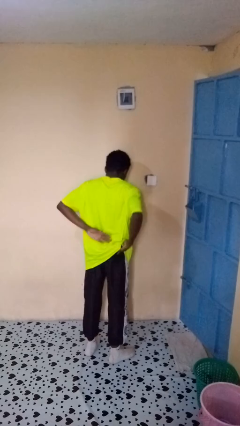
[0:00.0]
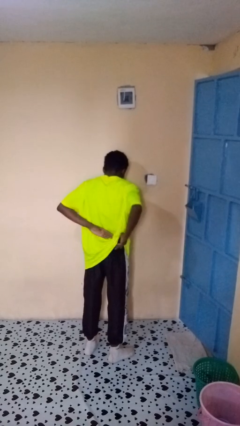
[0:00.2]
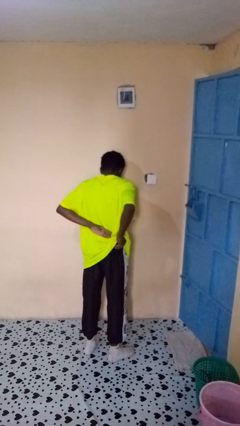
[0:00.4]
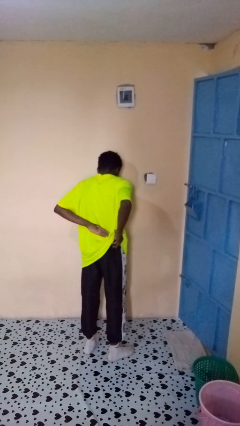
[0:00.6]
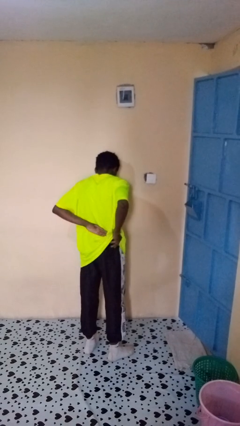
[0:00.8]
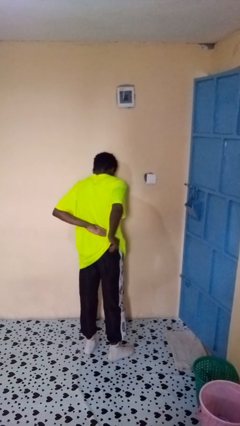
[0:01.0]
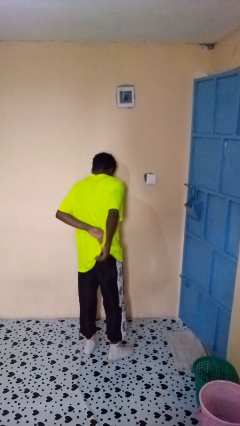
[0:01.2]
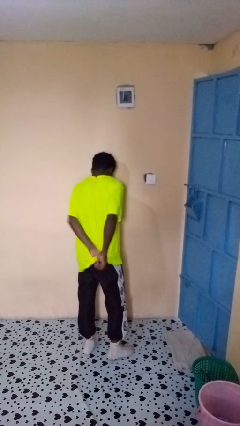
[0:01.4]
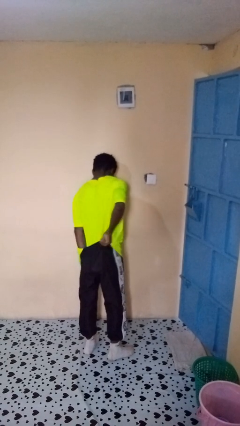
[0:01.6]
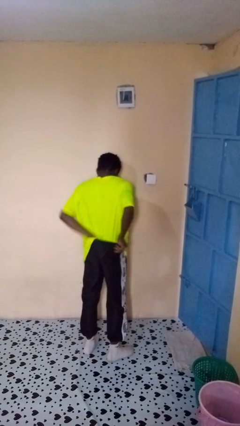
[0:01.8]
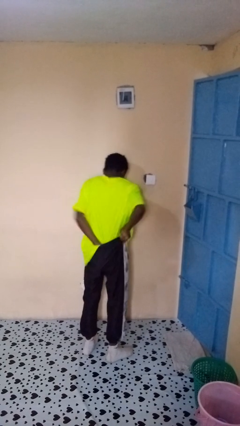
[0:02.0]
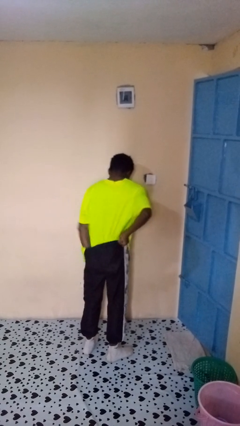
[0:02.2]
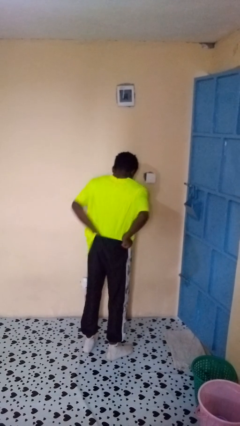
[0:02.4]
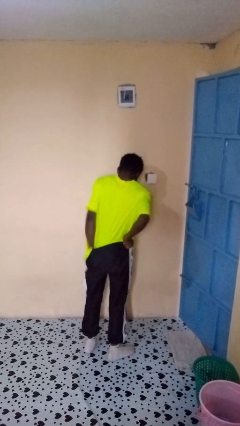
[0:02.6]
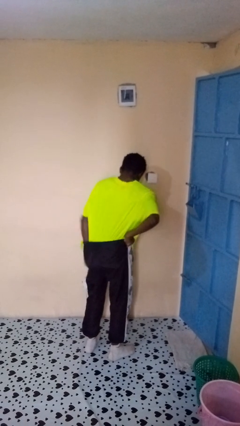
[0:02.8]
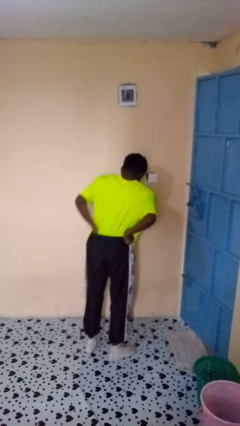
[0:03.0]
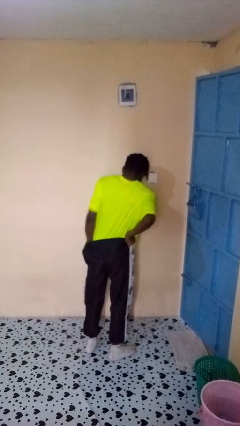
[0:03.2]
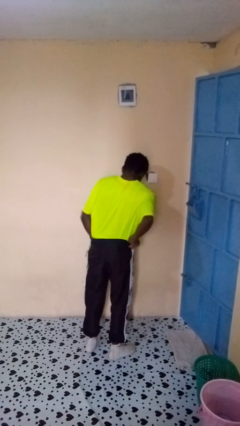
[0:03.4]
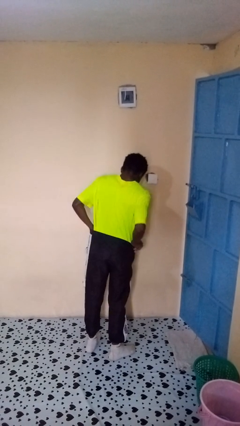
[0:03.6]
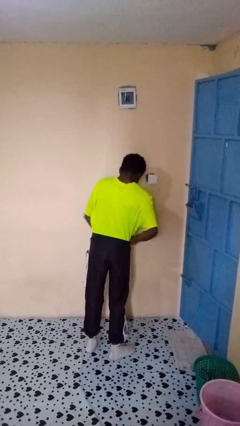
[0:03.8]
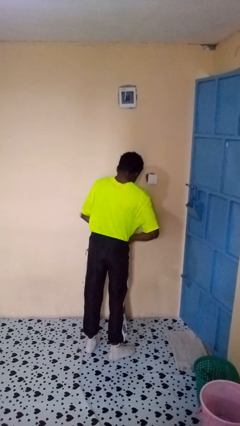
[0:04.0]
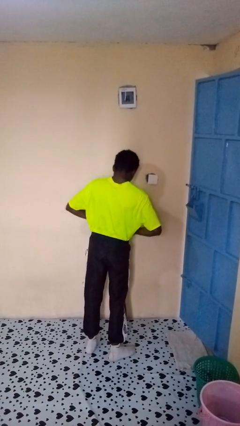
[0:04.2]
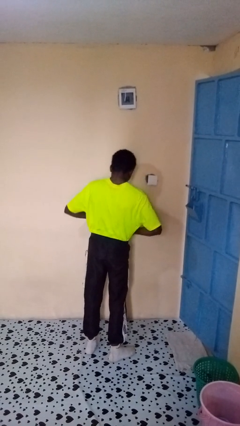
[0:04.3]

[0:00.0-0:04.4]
person tucks in shirt

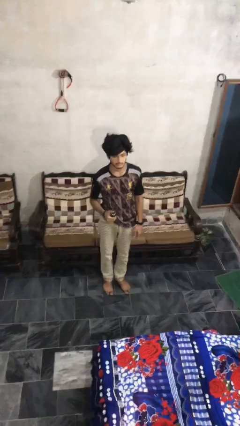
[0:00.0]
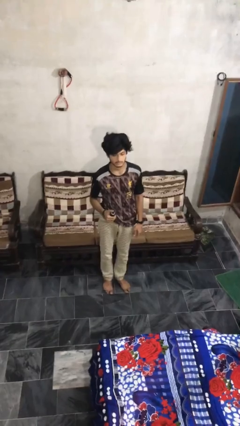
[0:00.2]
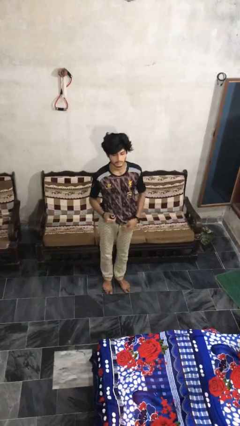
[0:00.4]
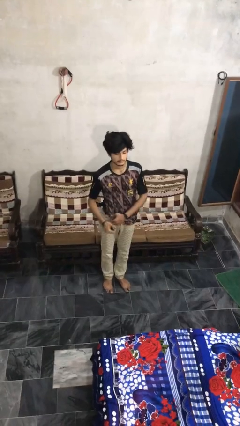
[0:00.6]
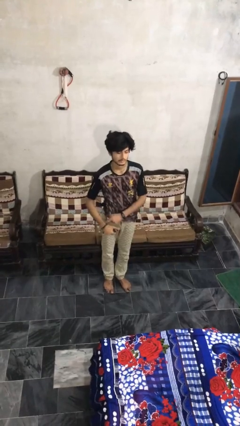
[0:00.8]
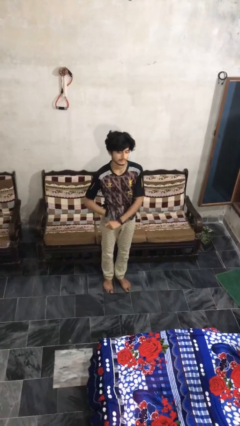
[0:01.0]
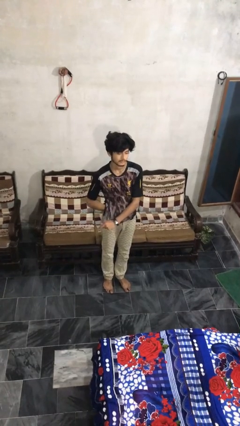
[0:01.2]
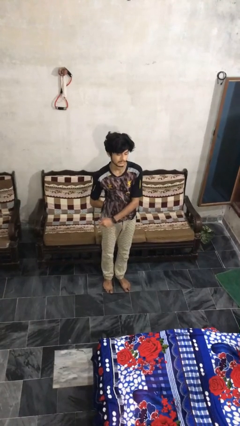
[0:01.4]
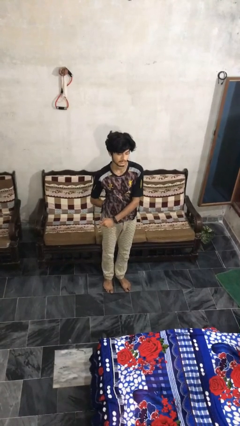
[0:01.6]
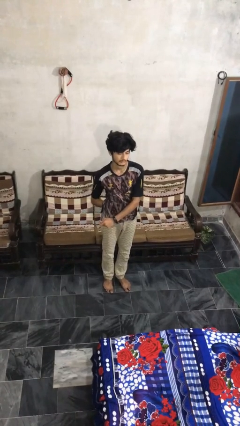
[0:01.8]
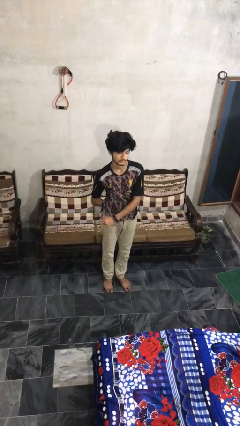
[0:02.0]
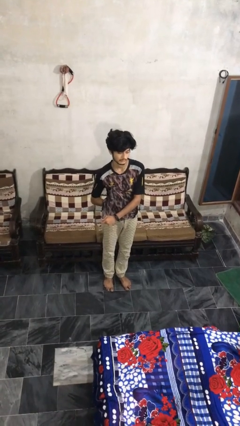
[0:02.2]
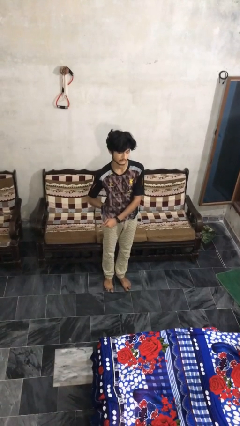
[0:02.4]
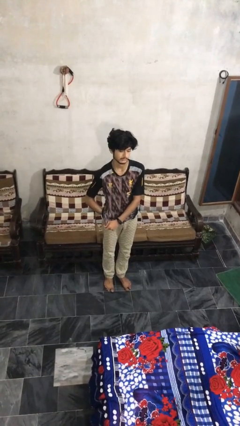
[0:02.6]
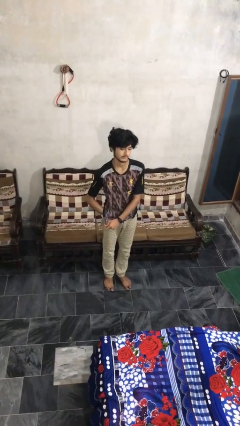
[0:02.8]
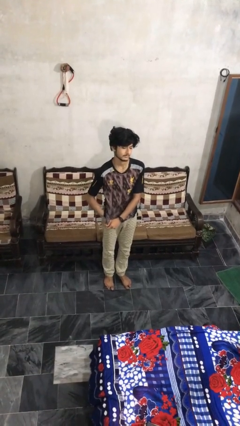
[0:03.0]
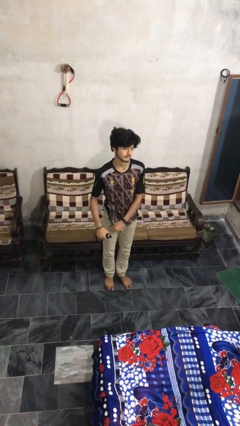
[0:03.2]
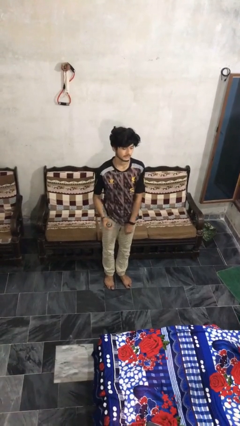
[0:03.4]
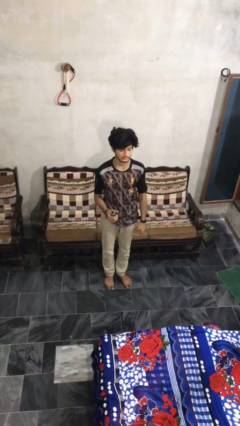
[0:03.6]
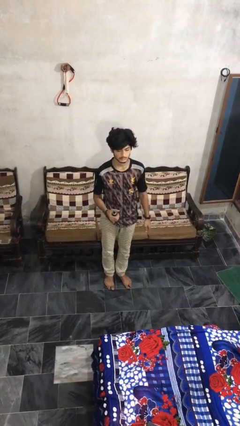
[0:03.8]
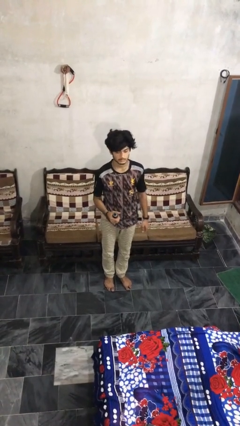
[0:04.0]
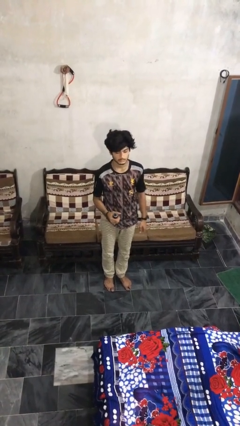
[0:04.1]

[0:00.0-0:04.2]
person applies deodorant

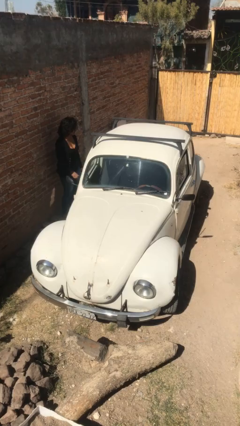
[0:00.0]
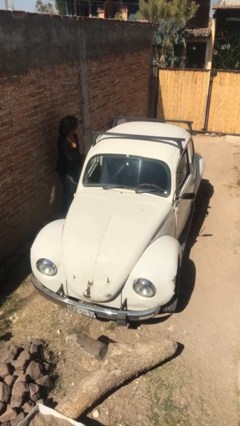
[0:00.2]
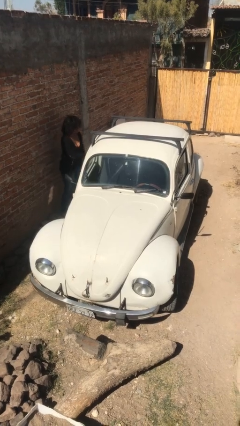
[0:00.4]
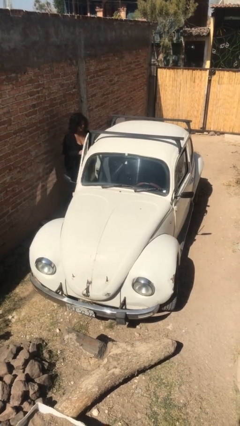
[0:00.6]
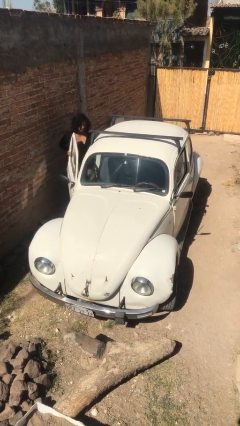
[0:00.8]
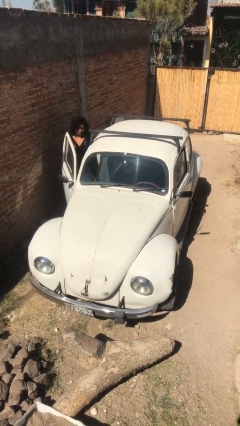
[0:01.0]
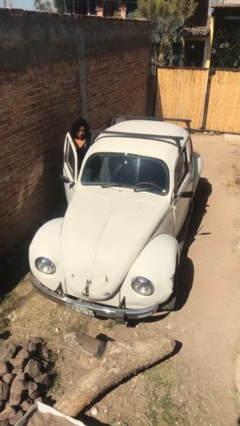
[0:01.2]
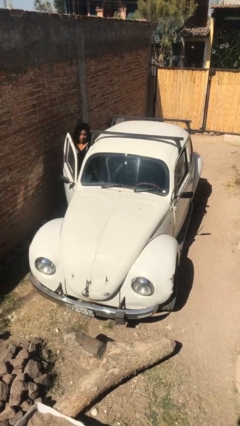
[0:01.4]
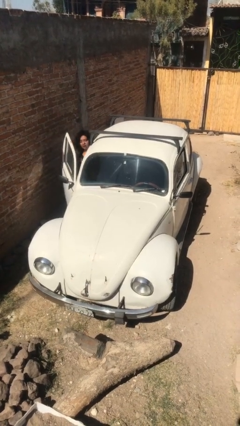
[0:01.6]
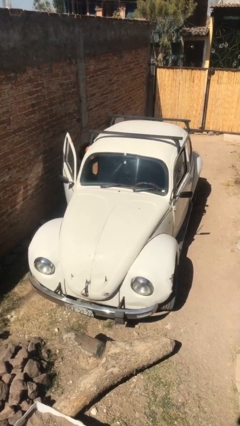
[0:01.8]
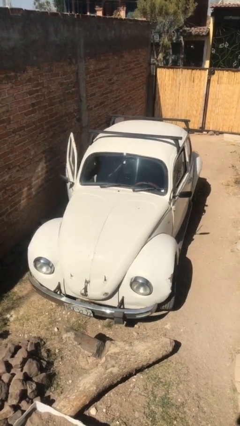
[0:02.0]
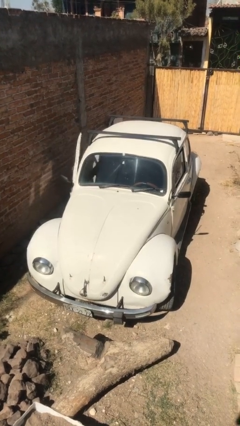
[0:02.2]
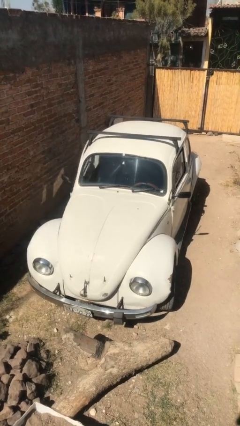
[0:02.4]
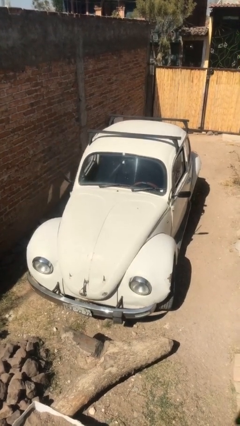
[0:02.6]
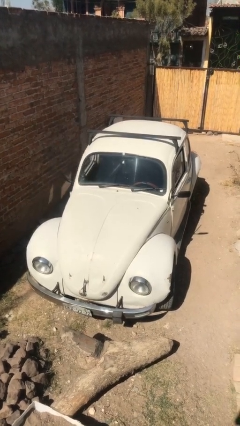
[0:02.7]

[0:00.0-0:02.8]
car picks up person

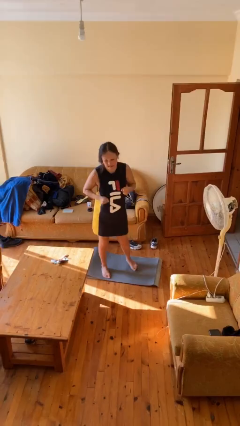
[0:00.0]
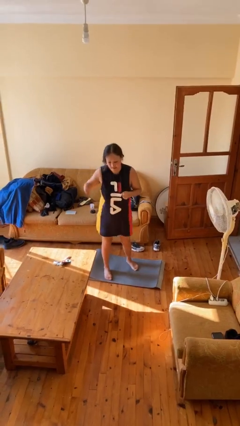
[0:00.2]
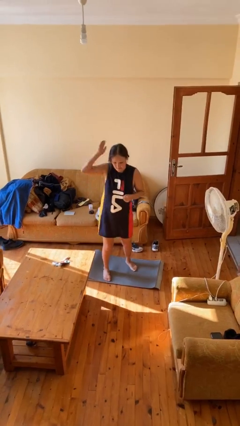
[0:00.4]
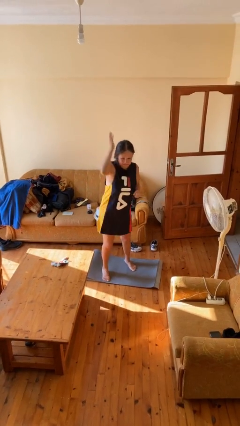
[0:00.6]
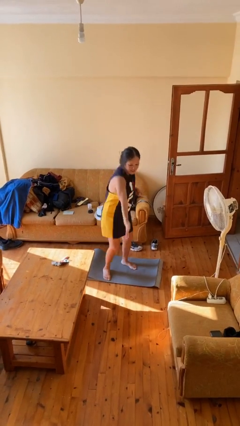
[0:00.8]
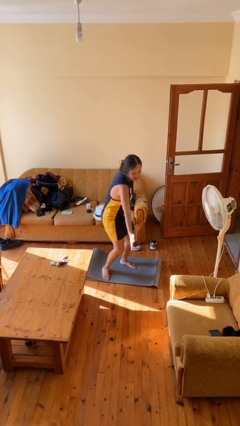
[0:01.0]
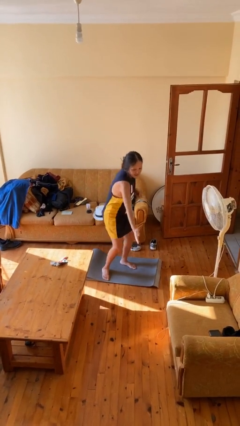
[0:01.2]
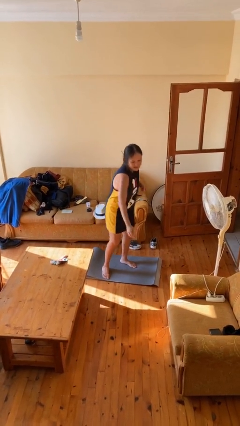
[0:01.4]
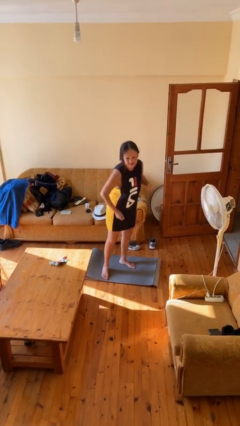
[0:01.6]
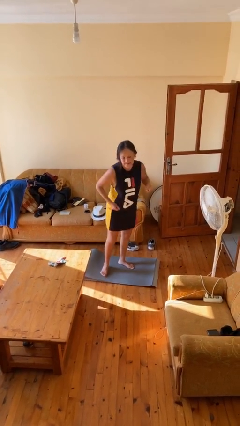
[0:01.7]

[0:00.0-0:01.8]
person karate chop

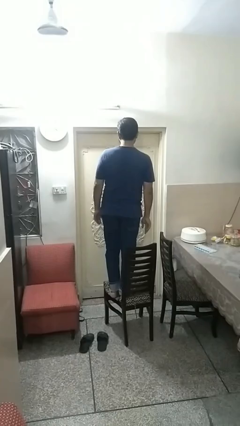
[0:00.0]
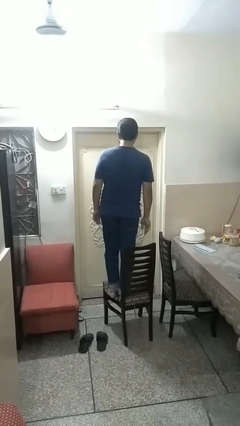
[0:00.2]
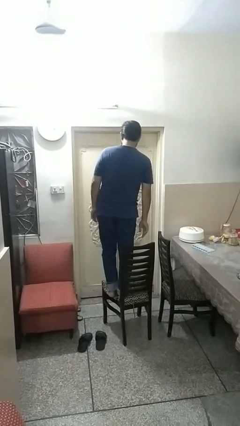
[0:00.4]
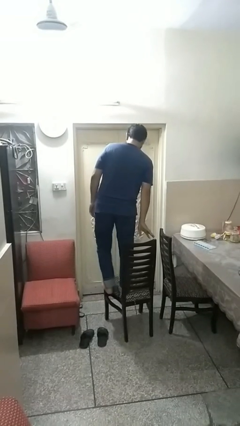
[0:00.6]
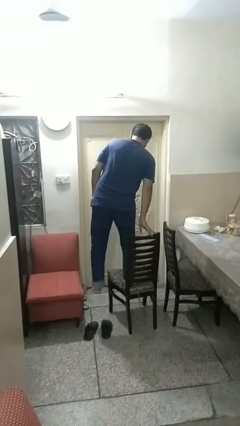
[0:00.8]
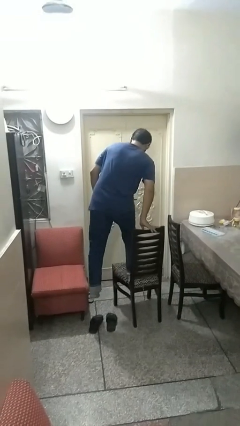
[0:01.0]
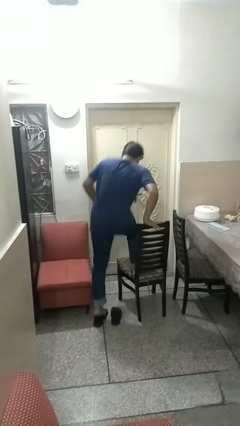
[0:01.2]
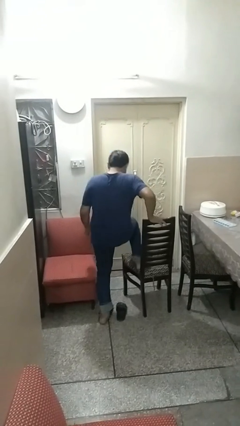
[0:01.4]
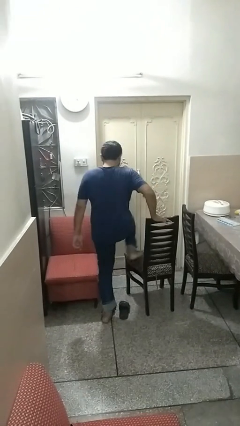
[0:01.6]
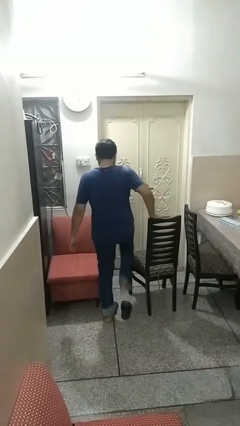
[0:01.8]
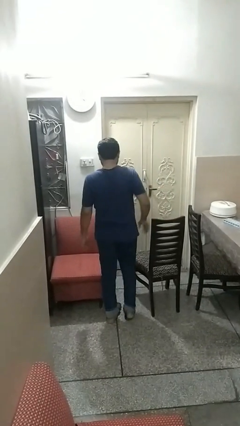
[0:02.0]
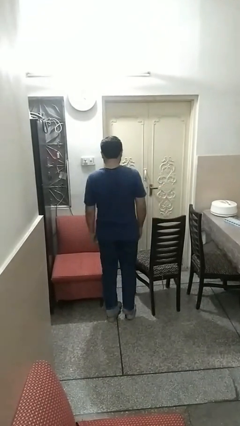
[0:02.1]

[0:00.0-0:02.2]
person climbs off chair

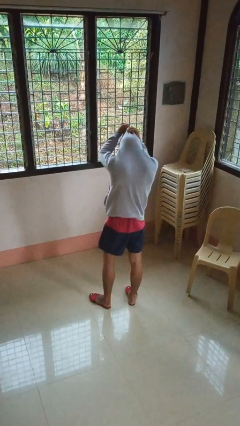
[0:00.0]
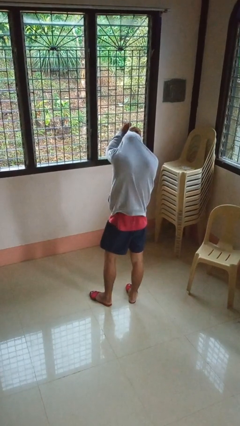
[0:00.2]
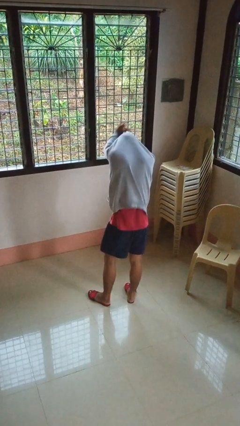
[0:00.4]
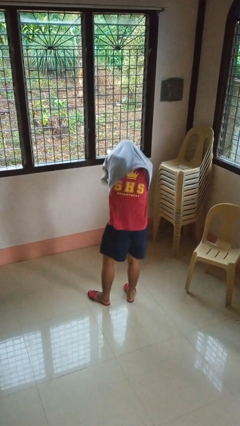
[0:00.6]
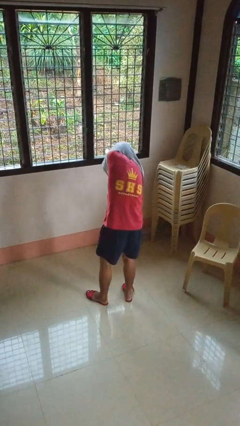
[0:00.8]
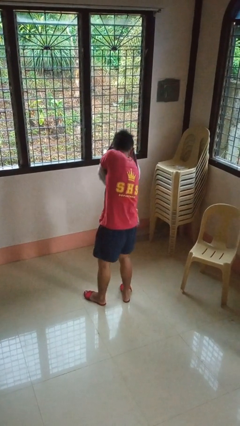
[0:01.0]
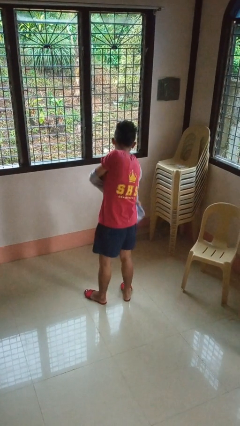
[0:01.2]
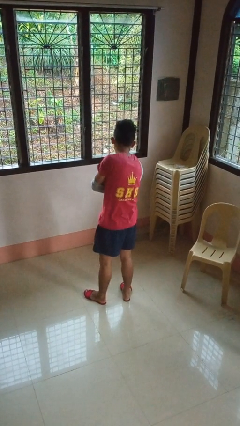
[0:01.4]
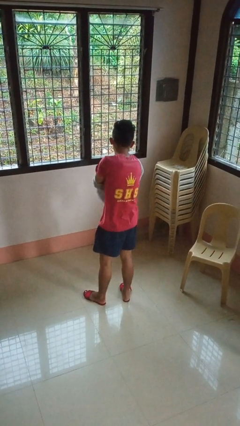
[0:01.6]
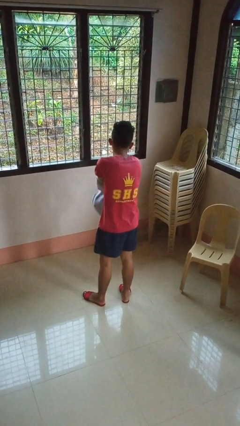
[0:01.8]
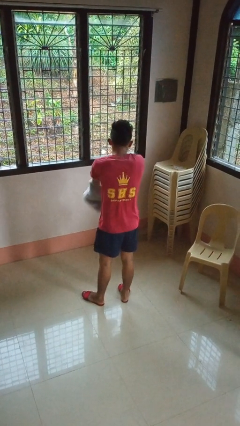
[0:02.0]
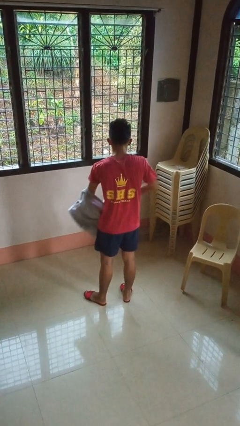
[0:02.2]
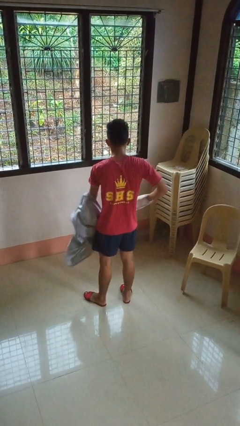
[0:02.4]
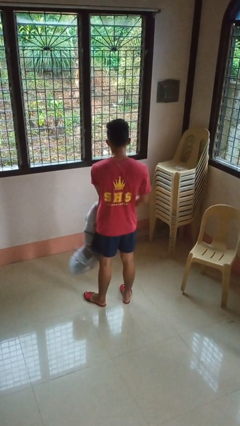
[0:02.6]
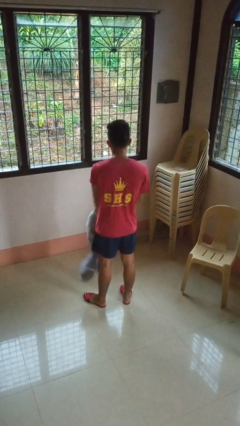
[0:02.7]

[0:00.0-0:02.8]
person takes off hoodie
